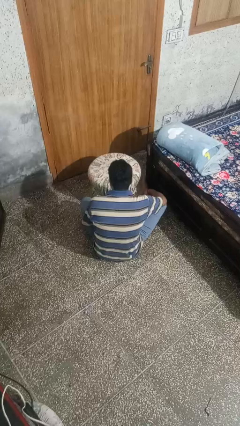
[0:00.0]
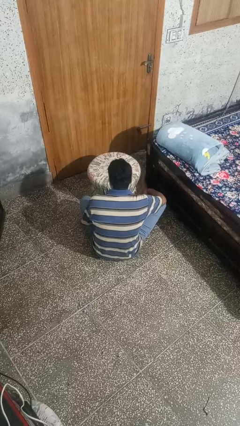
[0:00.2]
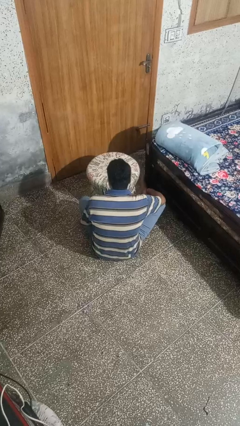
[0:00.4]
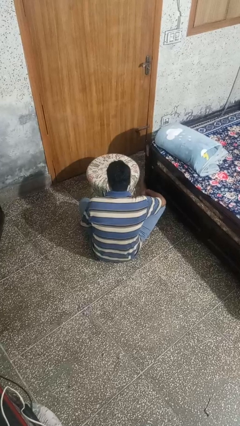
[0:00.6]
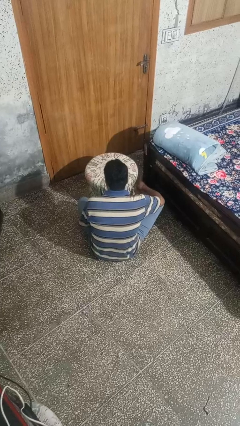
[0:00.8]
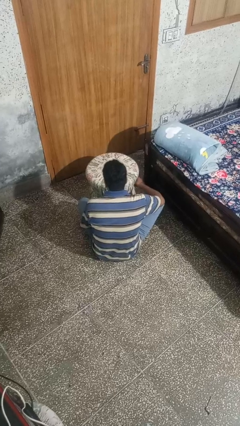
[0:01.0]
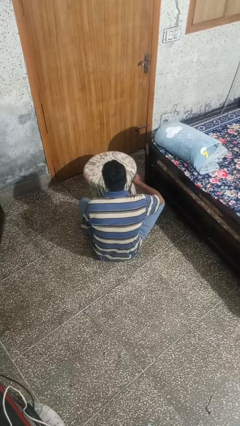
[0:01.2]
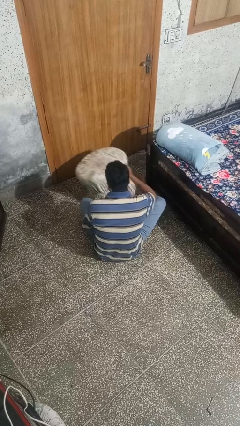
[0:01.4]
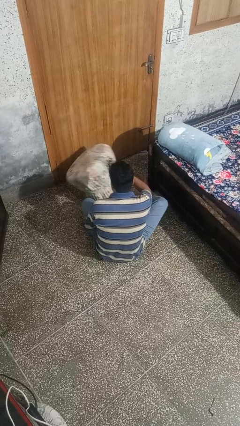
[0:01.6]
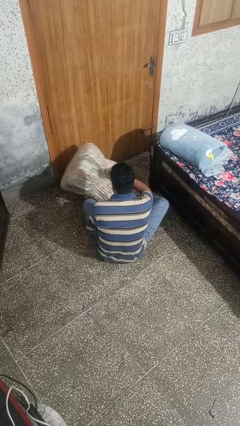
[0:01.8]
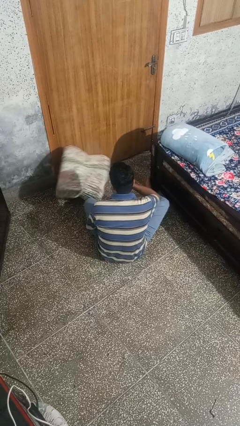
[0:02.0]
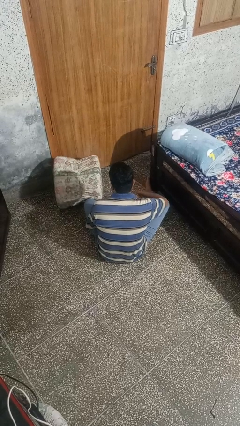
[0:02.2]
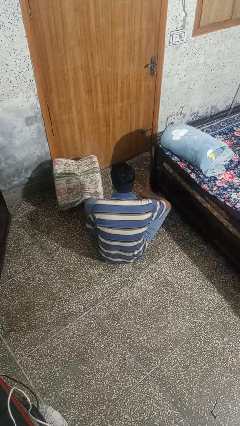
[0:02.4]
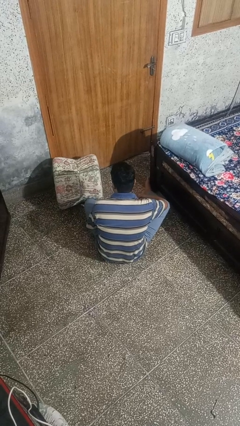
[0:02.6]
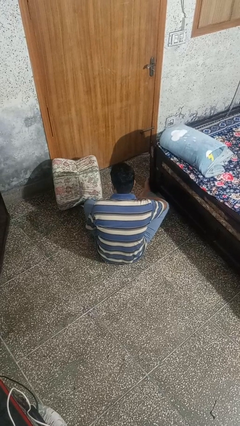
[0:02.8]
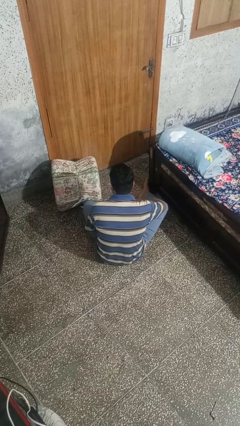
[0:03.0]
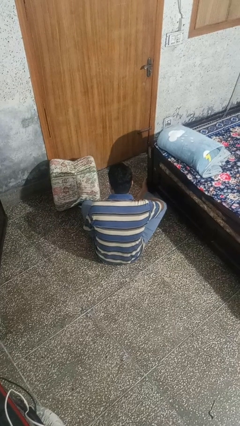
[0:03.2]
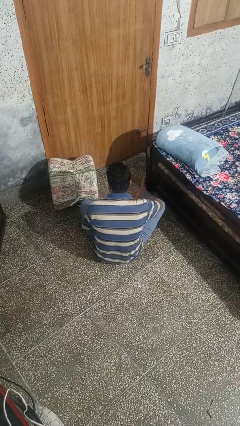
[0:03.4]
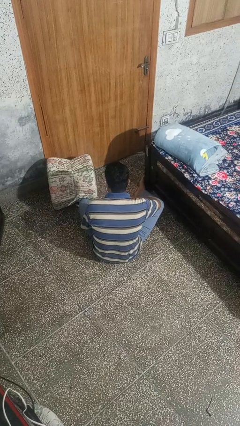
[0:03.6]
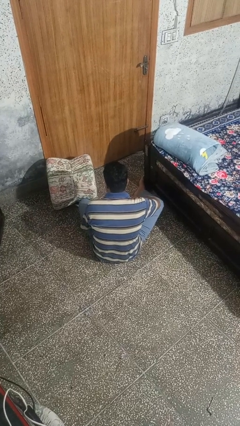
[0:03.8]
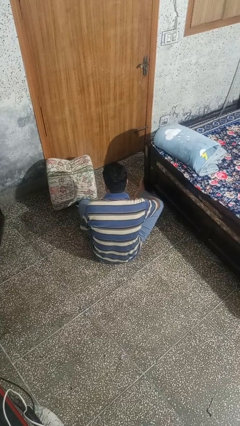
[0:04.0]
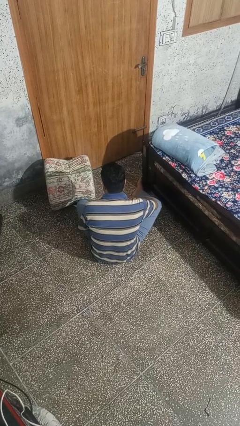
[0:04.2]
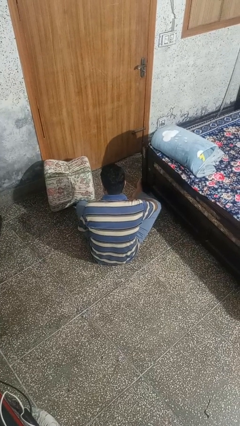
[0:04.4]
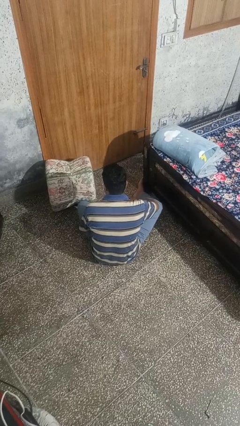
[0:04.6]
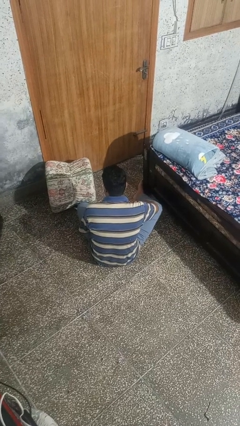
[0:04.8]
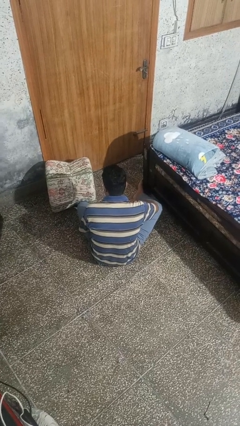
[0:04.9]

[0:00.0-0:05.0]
person knocks over furniture

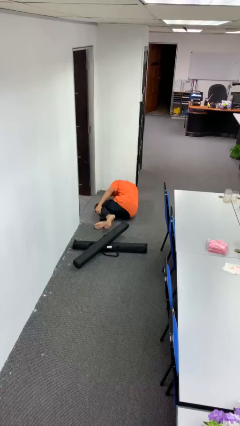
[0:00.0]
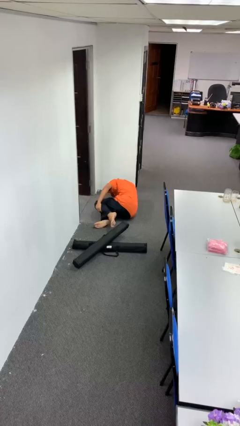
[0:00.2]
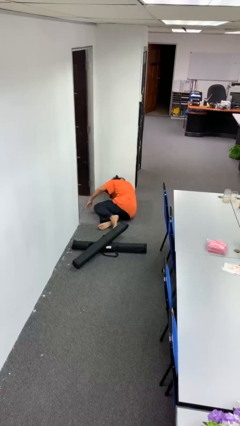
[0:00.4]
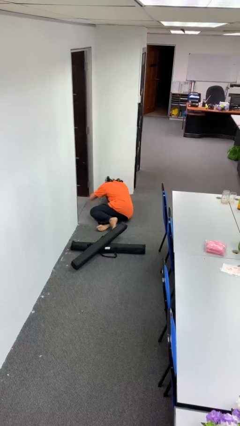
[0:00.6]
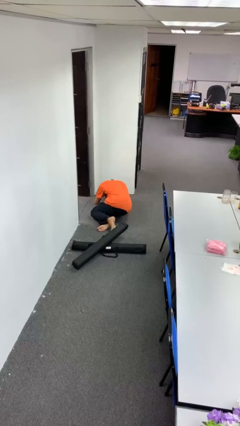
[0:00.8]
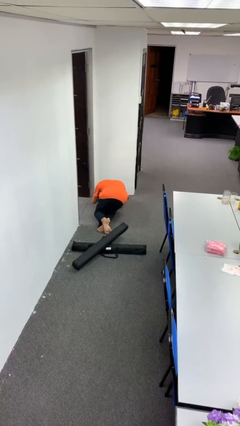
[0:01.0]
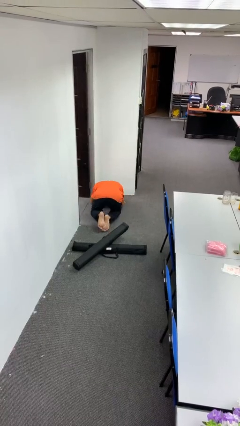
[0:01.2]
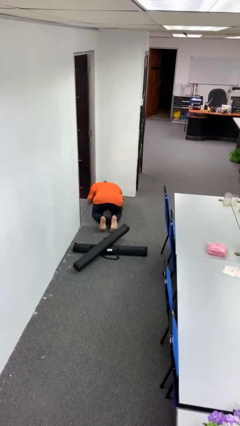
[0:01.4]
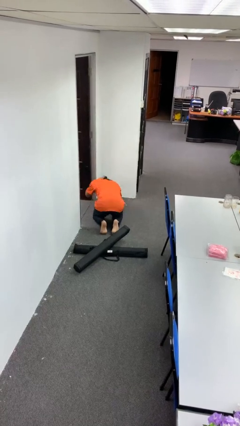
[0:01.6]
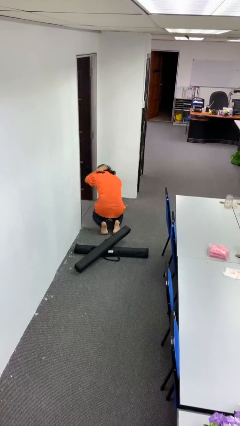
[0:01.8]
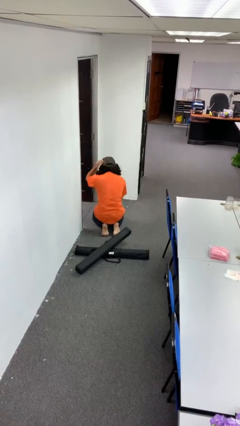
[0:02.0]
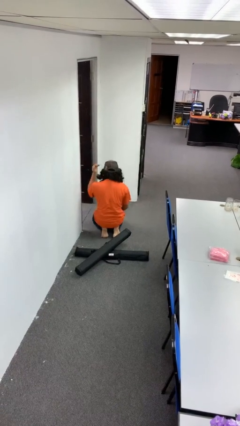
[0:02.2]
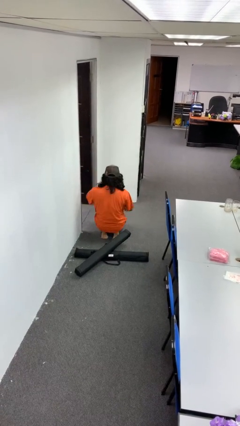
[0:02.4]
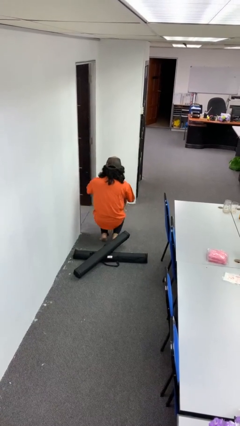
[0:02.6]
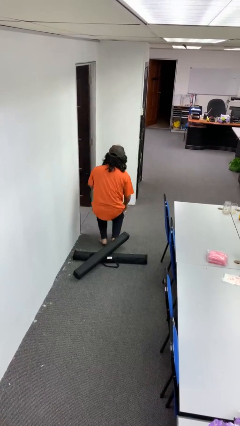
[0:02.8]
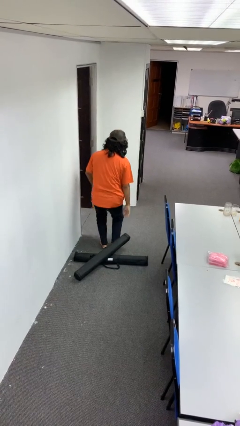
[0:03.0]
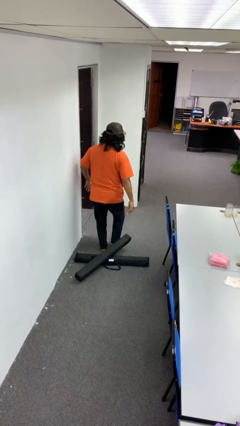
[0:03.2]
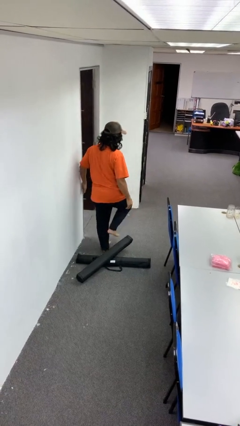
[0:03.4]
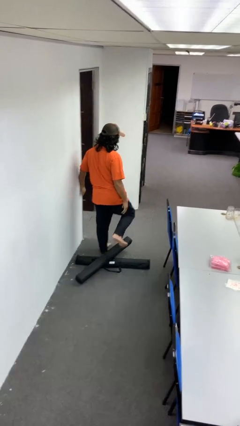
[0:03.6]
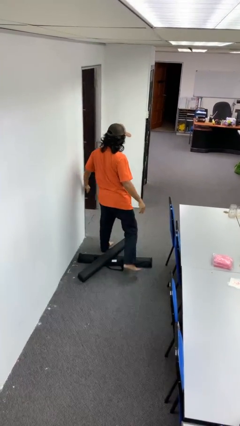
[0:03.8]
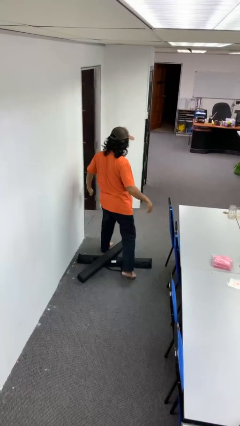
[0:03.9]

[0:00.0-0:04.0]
person stands up from floor

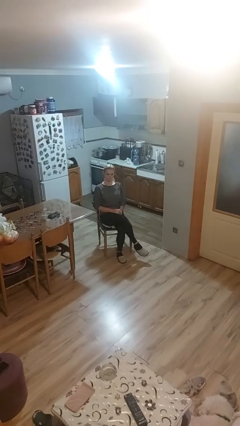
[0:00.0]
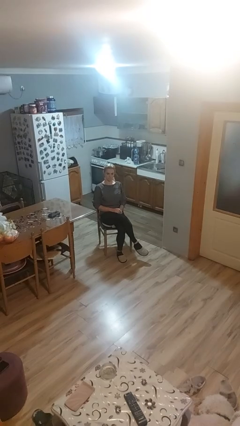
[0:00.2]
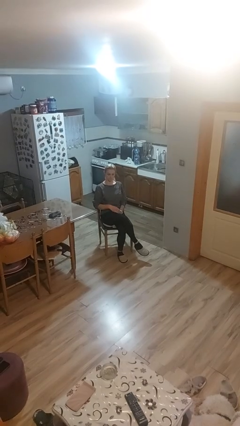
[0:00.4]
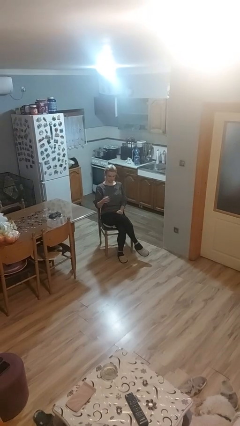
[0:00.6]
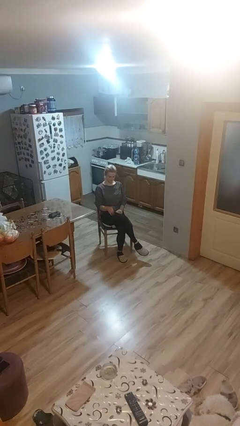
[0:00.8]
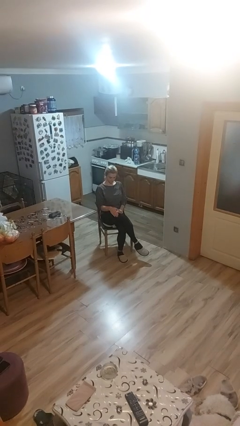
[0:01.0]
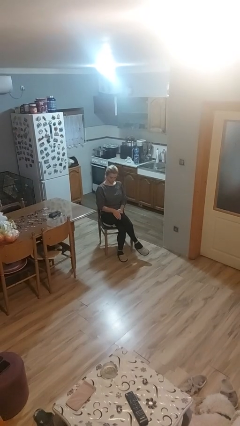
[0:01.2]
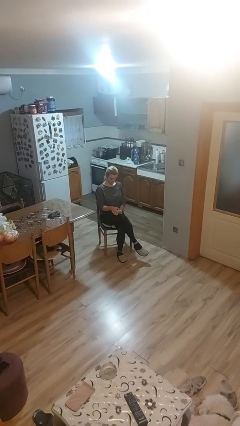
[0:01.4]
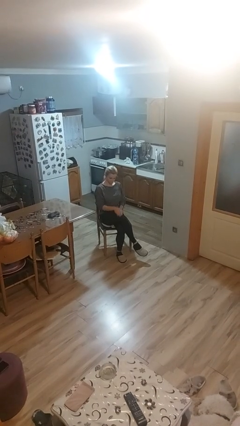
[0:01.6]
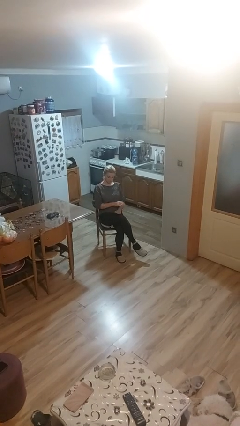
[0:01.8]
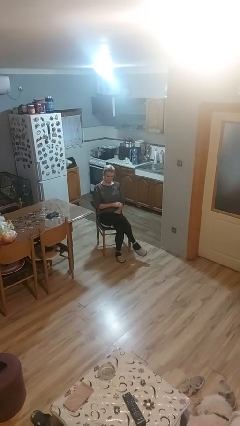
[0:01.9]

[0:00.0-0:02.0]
person slaps hands on thighs

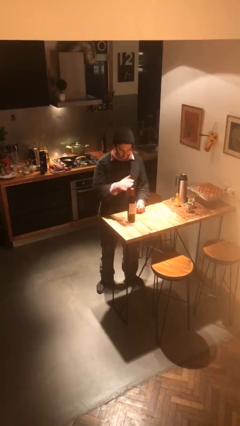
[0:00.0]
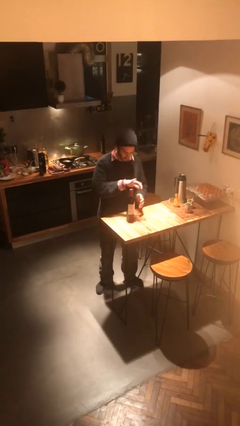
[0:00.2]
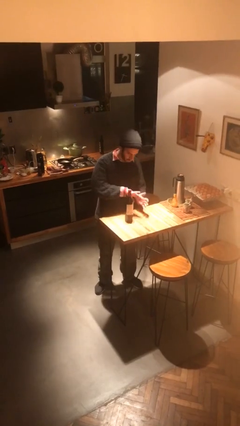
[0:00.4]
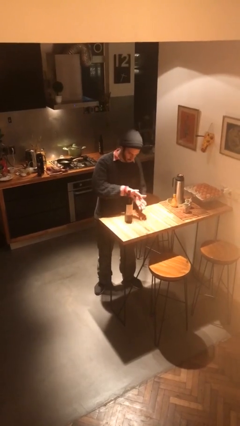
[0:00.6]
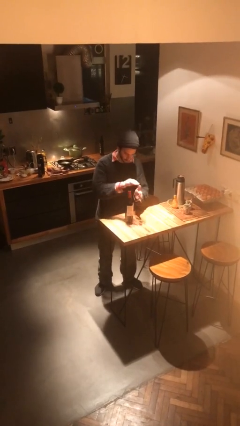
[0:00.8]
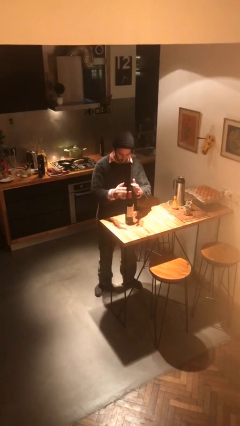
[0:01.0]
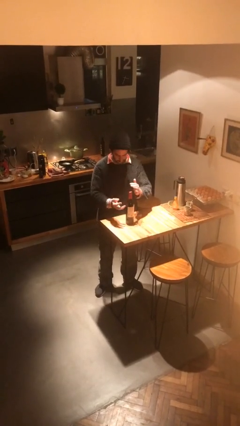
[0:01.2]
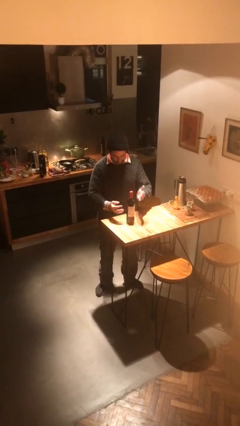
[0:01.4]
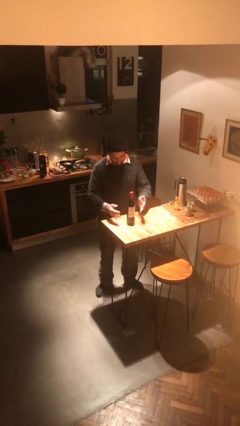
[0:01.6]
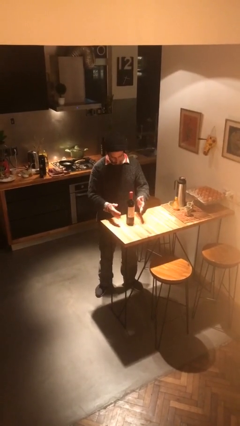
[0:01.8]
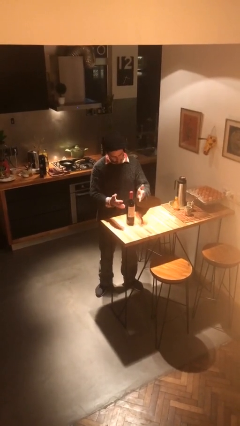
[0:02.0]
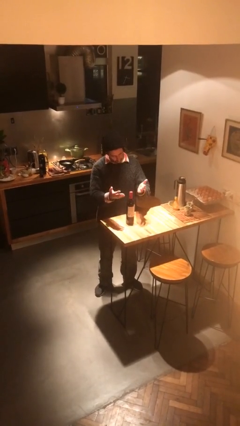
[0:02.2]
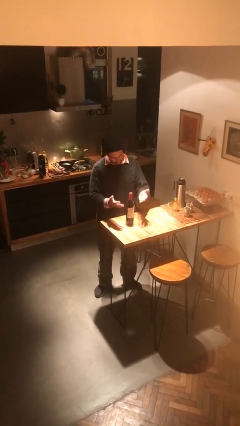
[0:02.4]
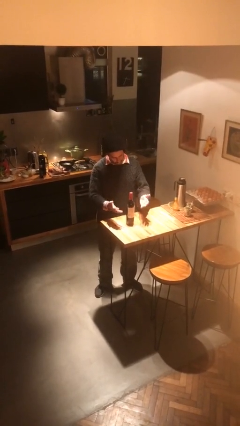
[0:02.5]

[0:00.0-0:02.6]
person waves hand over object

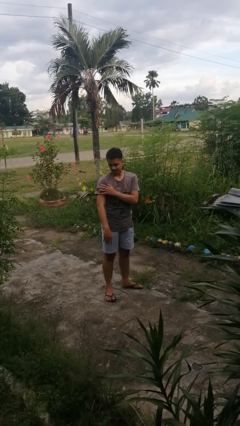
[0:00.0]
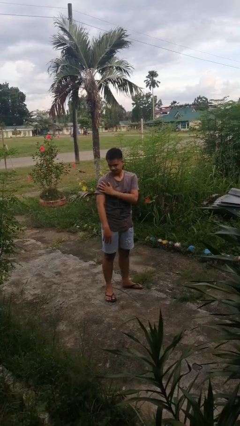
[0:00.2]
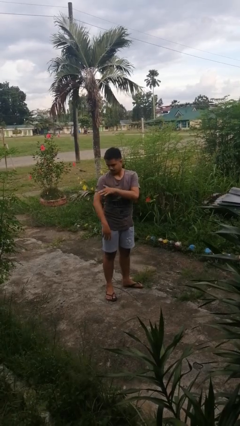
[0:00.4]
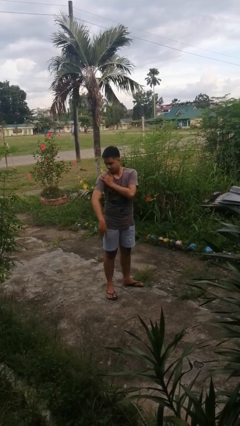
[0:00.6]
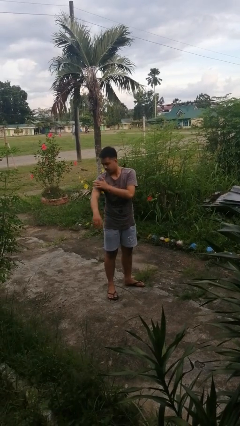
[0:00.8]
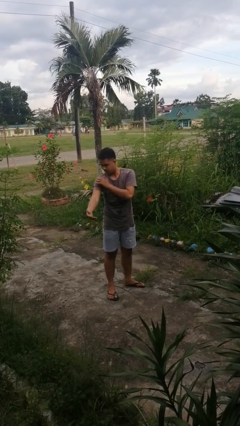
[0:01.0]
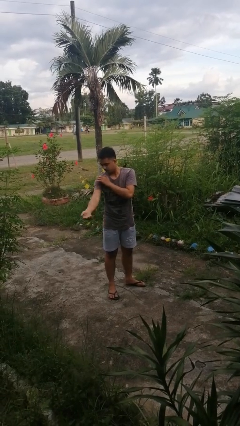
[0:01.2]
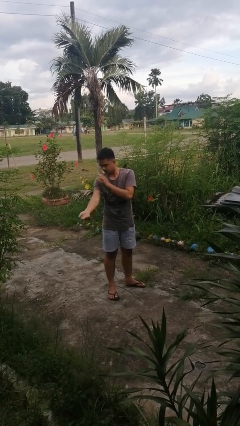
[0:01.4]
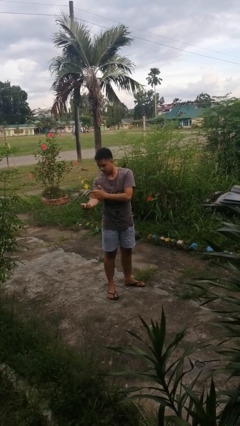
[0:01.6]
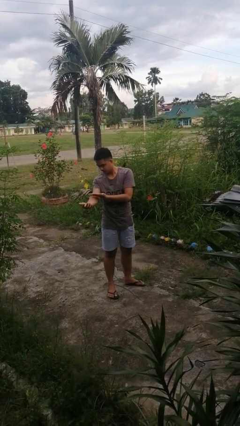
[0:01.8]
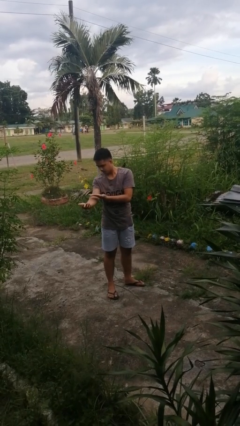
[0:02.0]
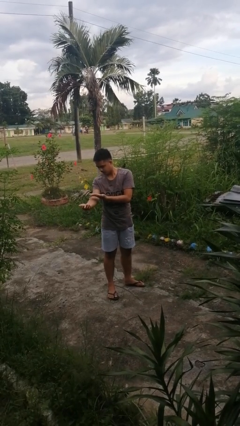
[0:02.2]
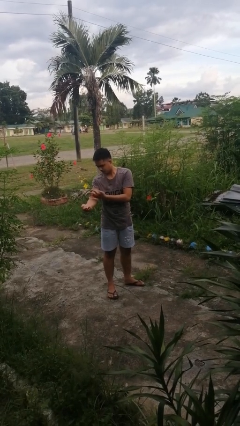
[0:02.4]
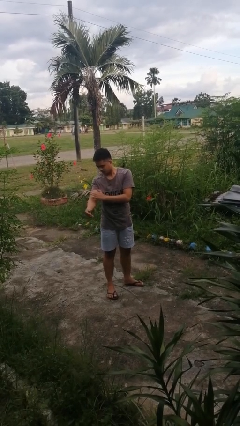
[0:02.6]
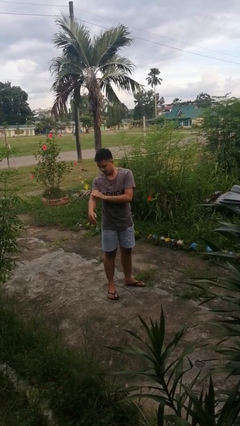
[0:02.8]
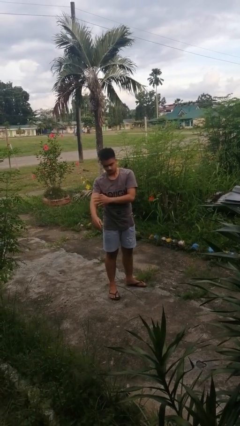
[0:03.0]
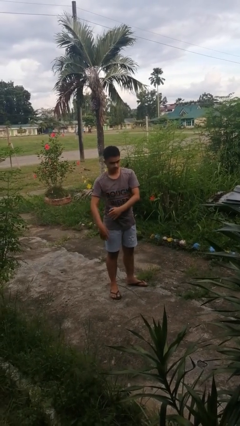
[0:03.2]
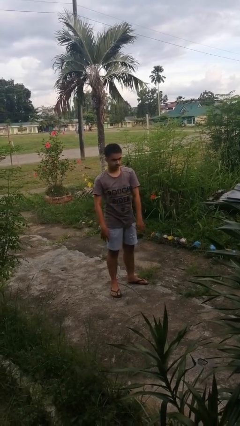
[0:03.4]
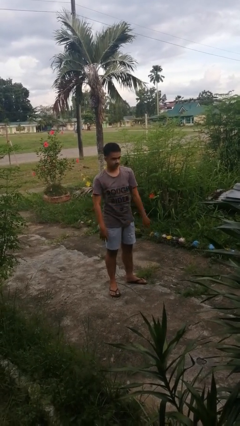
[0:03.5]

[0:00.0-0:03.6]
person swats bug

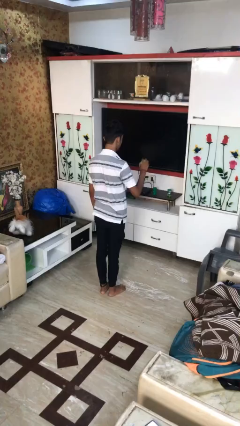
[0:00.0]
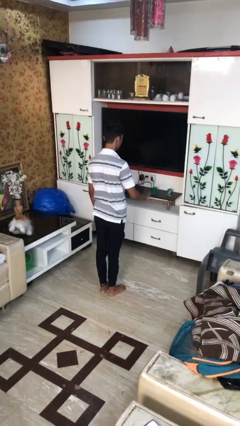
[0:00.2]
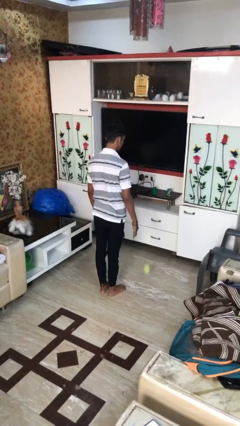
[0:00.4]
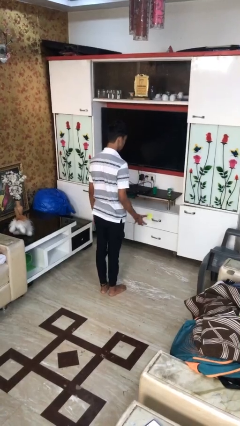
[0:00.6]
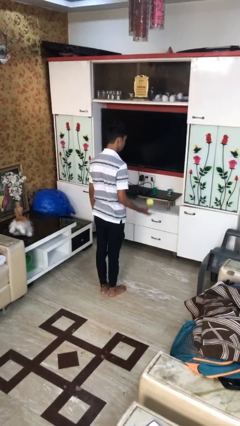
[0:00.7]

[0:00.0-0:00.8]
person bounces ball on floor
